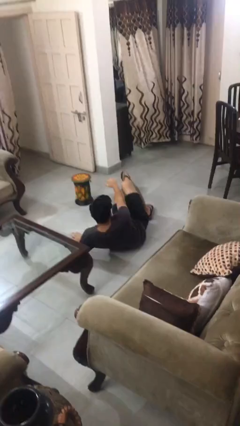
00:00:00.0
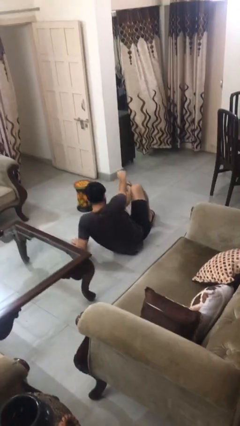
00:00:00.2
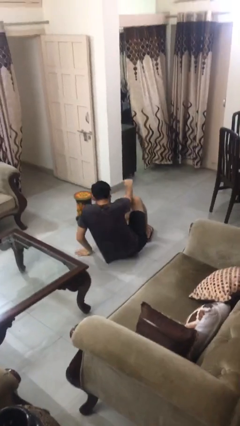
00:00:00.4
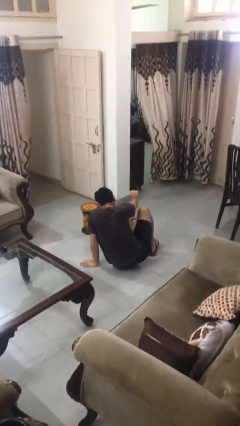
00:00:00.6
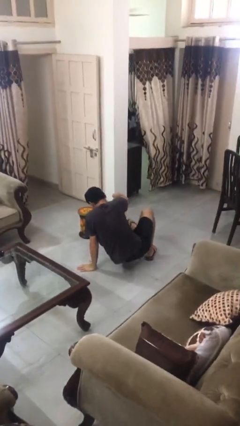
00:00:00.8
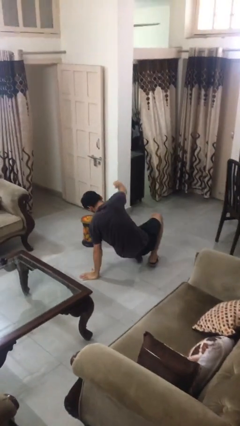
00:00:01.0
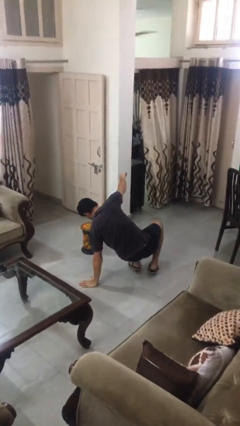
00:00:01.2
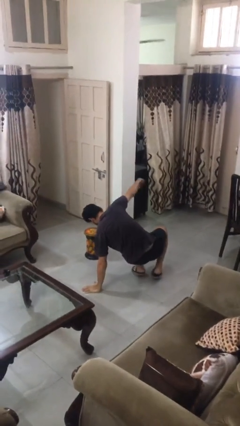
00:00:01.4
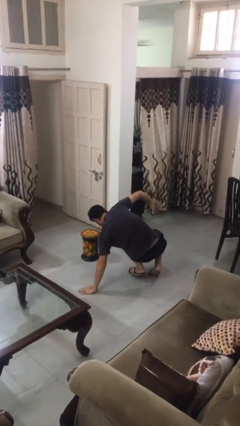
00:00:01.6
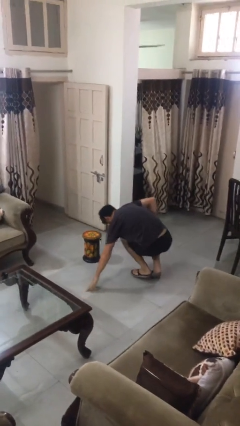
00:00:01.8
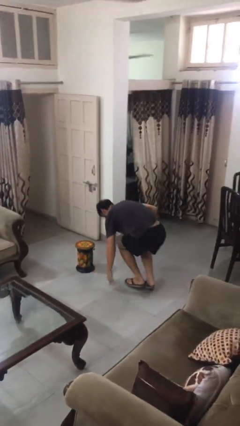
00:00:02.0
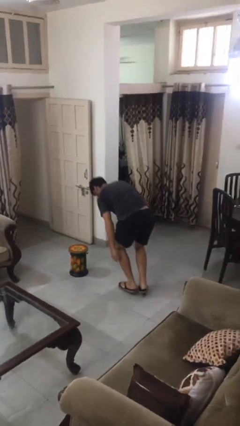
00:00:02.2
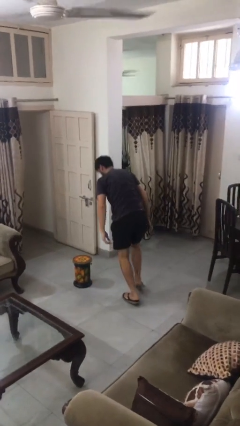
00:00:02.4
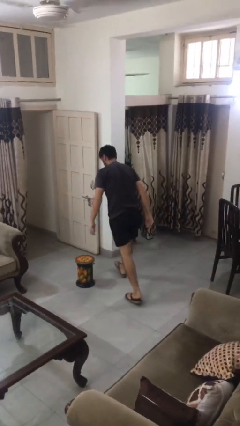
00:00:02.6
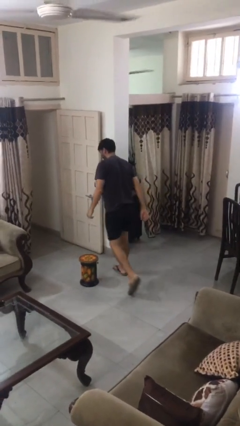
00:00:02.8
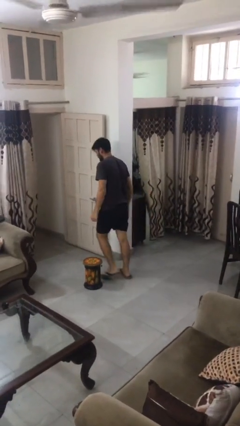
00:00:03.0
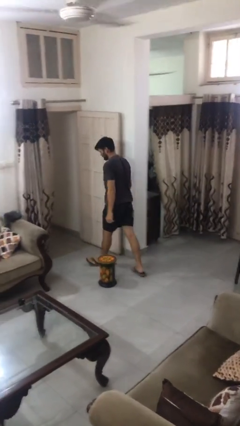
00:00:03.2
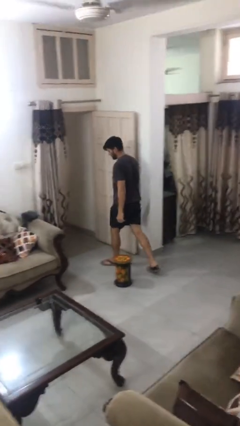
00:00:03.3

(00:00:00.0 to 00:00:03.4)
person stands up from floor

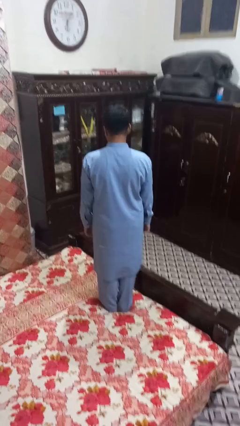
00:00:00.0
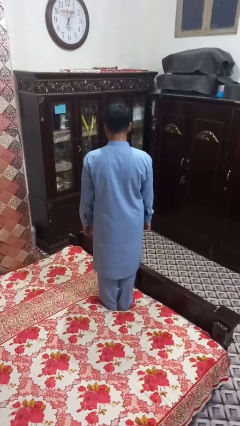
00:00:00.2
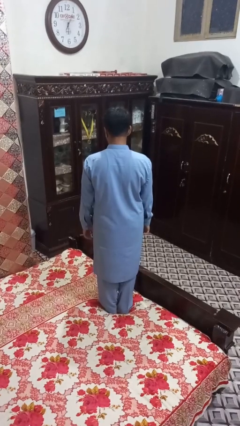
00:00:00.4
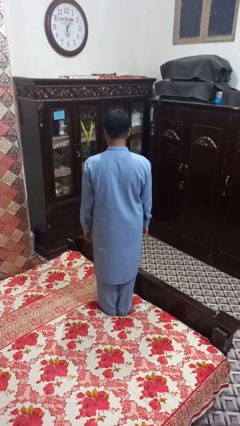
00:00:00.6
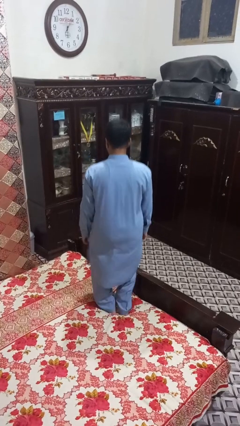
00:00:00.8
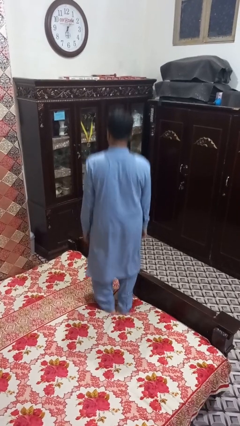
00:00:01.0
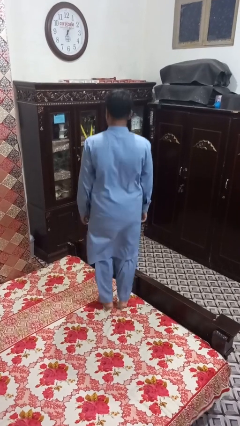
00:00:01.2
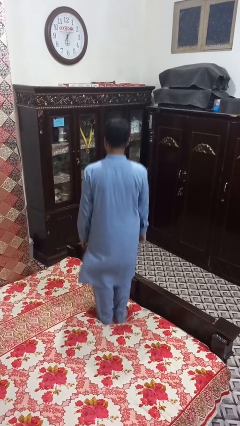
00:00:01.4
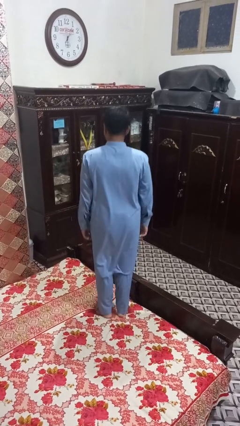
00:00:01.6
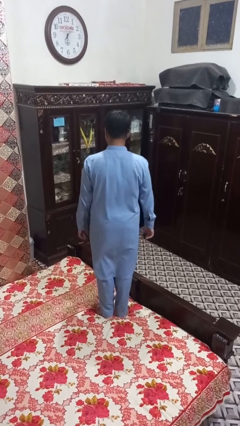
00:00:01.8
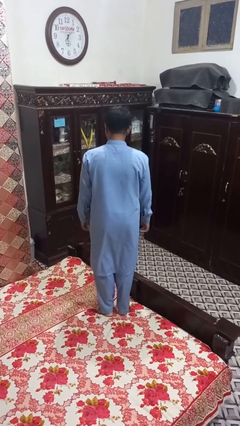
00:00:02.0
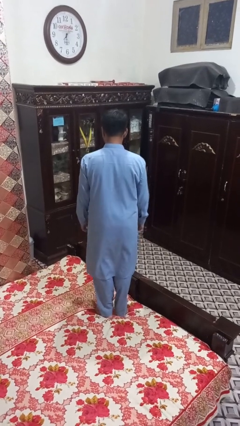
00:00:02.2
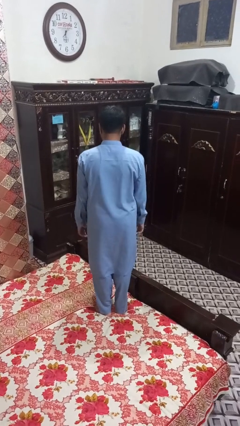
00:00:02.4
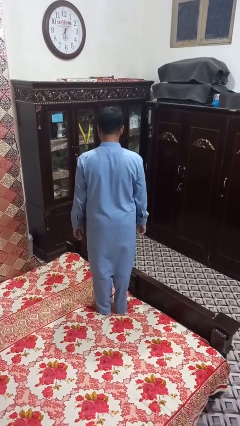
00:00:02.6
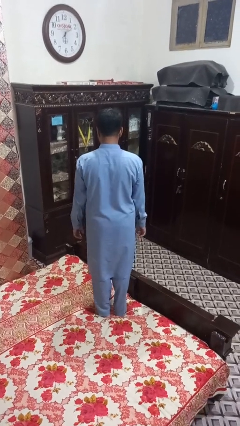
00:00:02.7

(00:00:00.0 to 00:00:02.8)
person jumps on bed

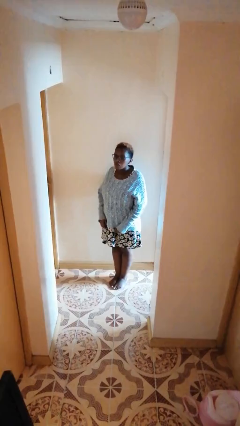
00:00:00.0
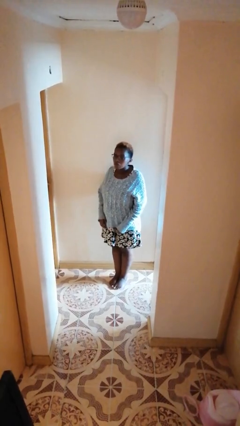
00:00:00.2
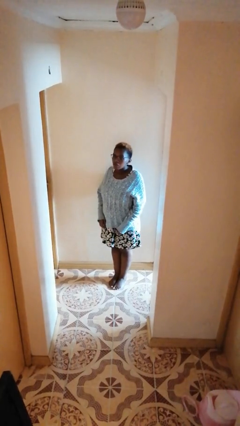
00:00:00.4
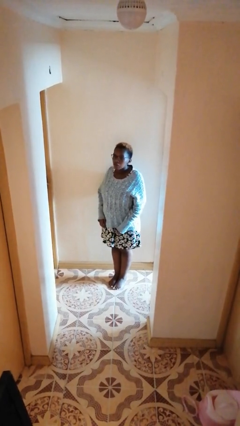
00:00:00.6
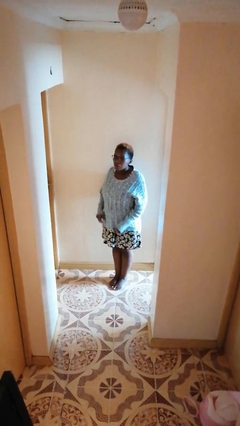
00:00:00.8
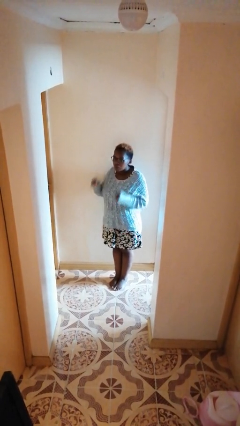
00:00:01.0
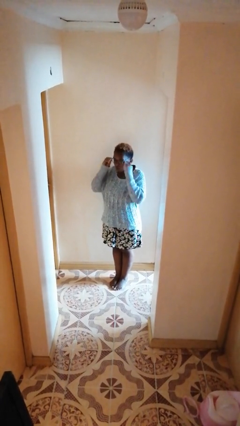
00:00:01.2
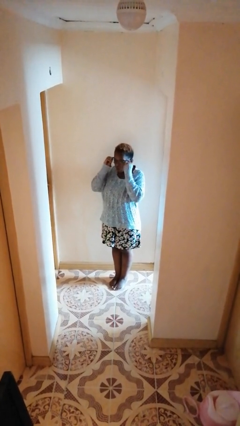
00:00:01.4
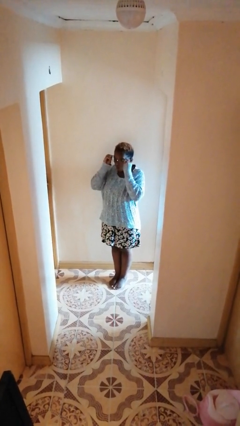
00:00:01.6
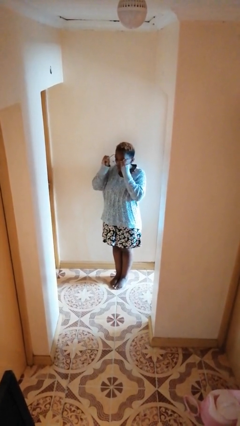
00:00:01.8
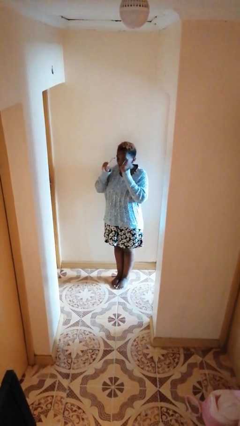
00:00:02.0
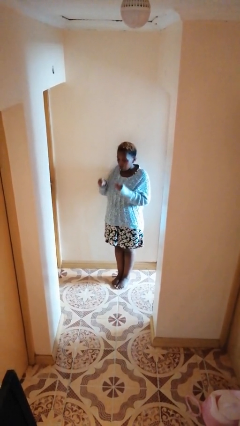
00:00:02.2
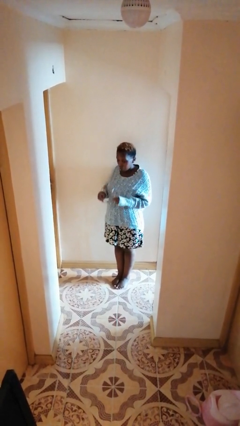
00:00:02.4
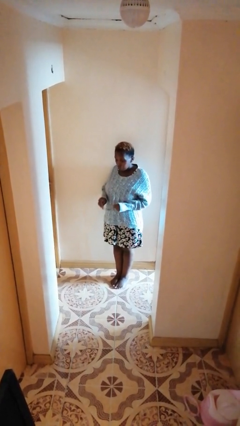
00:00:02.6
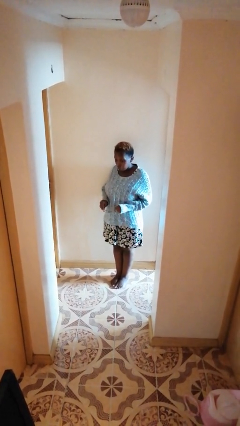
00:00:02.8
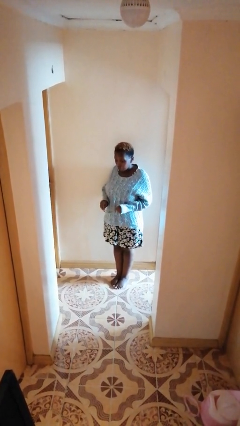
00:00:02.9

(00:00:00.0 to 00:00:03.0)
person takes off glasses

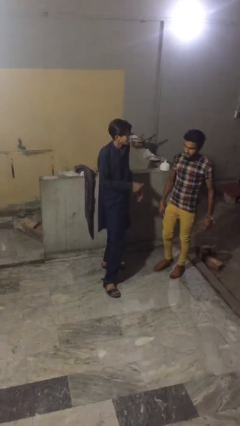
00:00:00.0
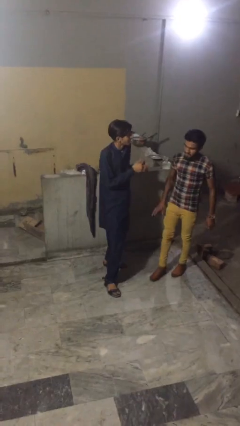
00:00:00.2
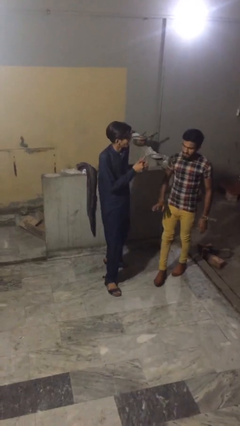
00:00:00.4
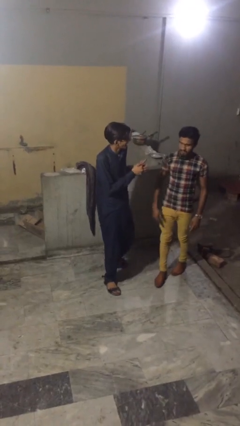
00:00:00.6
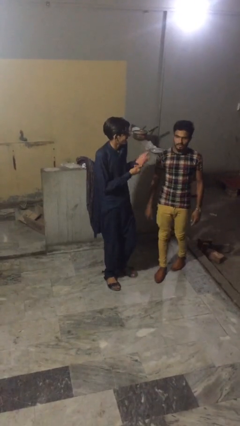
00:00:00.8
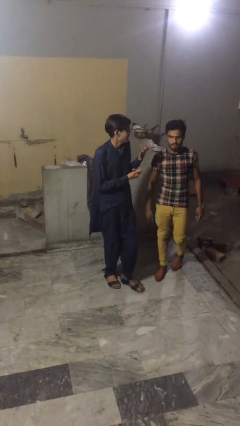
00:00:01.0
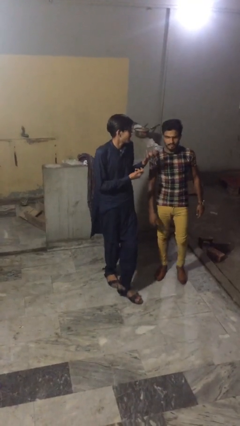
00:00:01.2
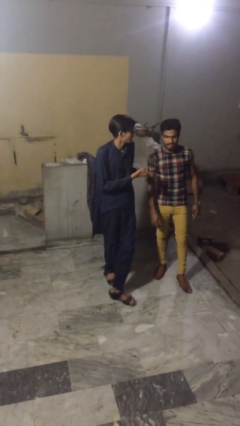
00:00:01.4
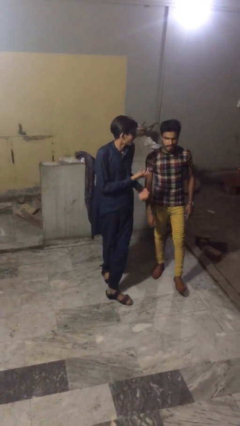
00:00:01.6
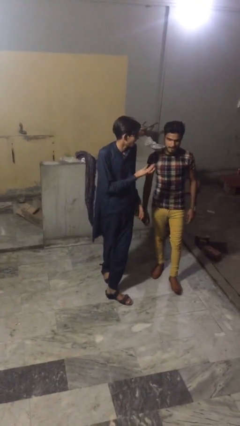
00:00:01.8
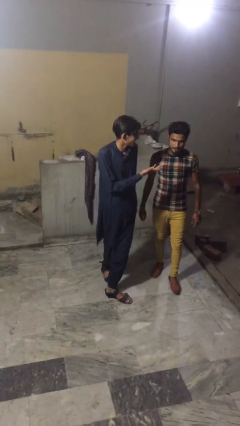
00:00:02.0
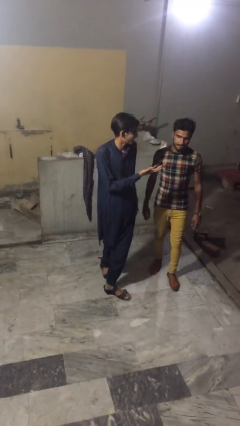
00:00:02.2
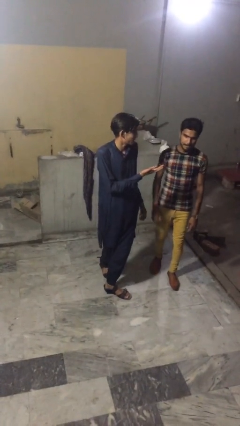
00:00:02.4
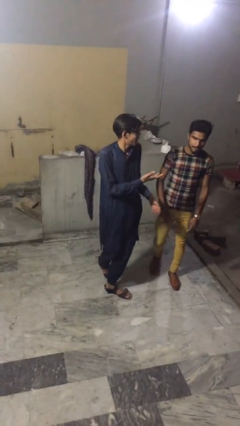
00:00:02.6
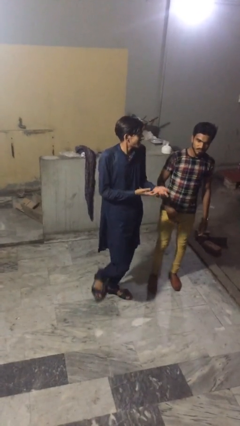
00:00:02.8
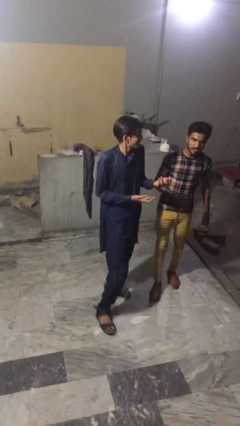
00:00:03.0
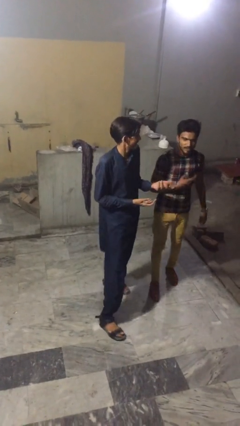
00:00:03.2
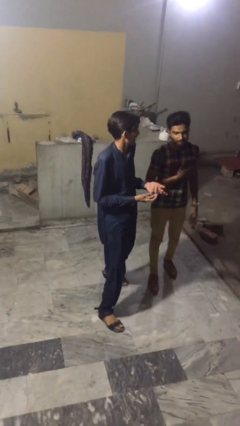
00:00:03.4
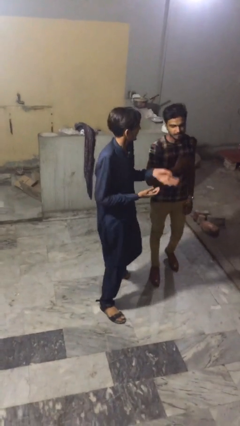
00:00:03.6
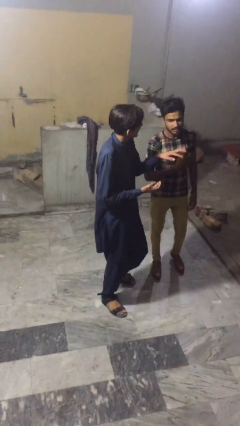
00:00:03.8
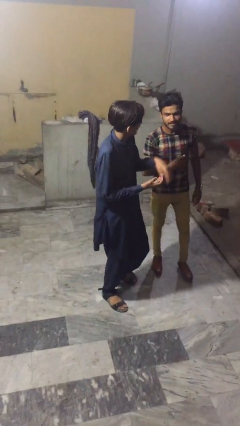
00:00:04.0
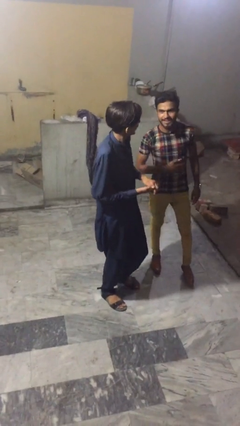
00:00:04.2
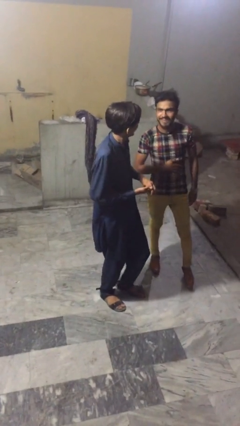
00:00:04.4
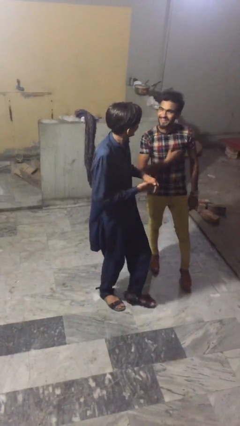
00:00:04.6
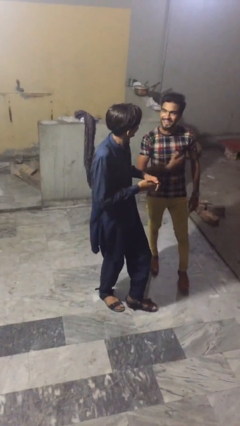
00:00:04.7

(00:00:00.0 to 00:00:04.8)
person talks to person

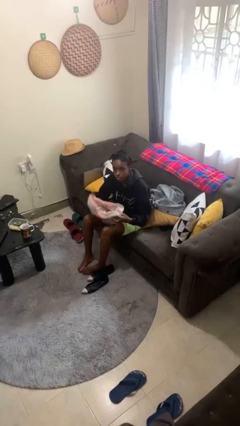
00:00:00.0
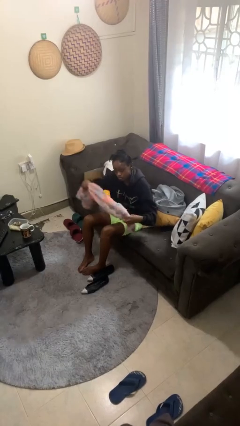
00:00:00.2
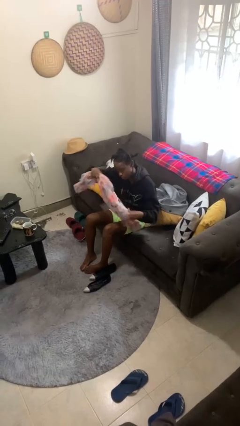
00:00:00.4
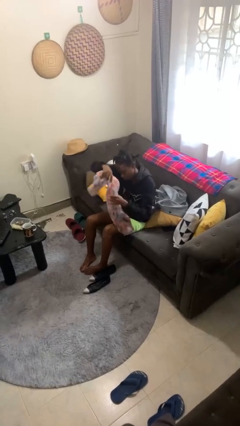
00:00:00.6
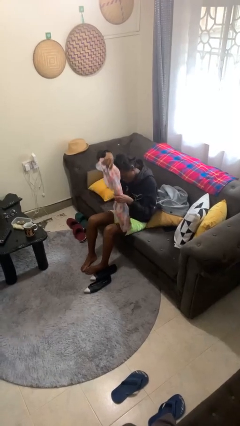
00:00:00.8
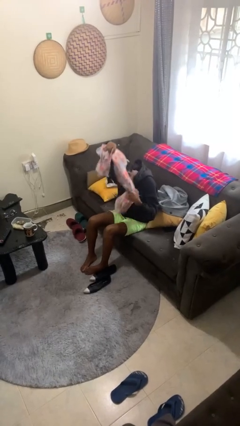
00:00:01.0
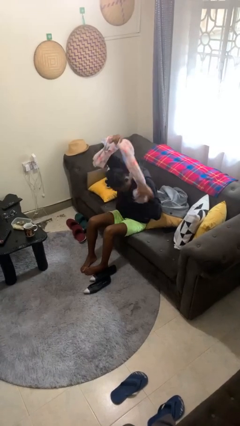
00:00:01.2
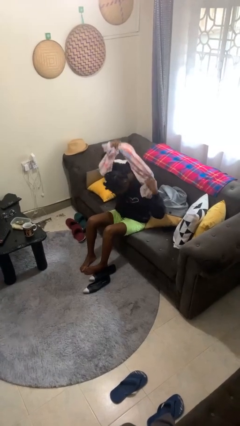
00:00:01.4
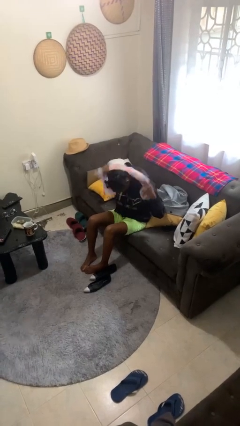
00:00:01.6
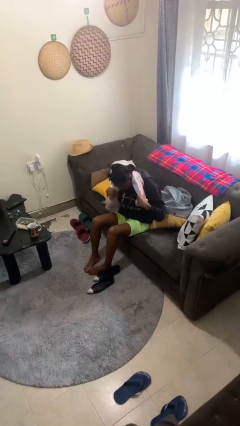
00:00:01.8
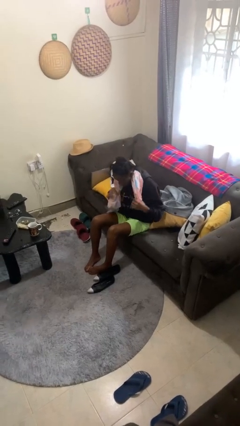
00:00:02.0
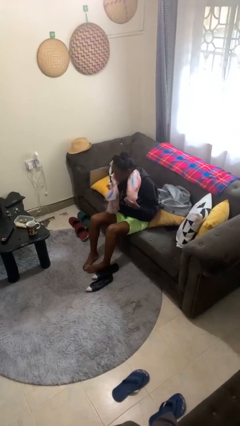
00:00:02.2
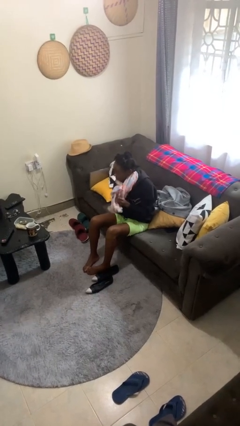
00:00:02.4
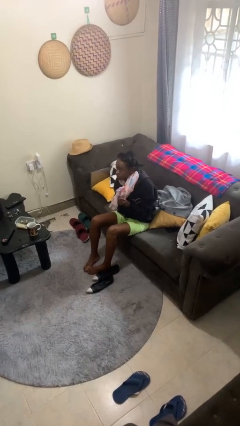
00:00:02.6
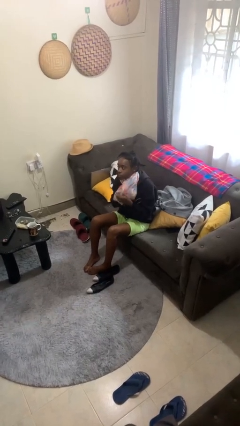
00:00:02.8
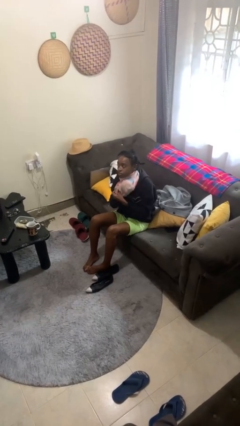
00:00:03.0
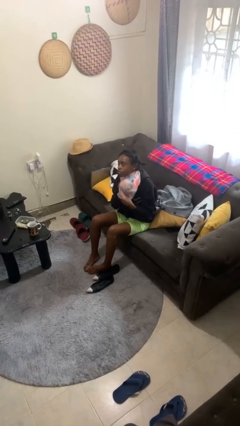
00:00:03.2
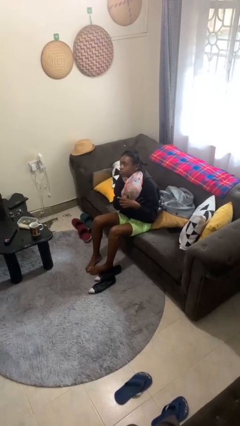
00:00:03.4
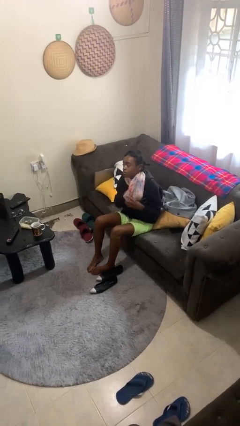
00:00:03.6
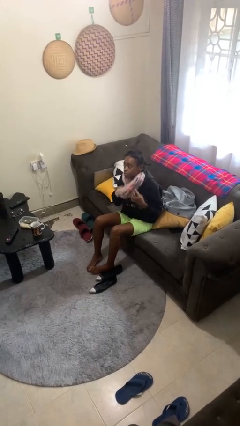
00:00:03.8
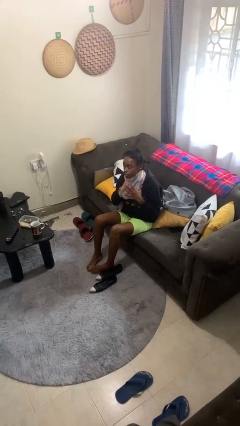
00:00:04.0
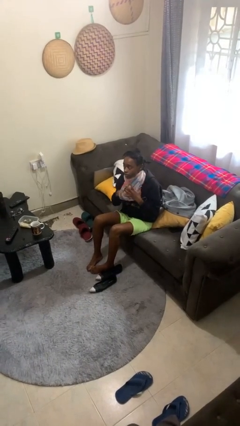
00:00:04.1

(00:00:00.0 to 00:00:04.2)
person puts on scarf
